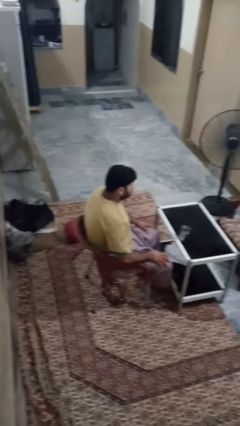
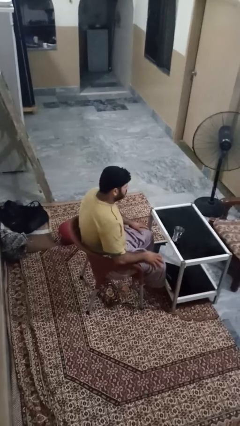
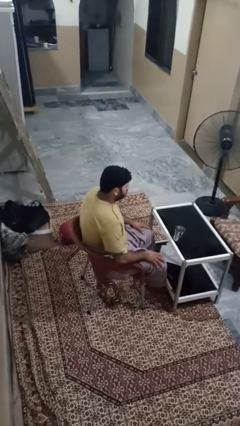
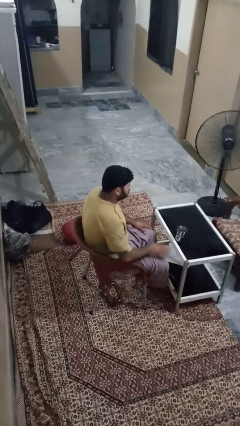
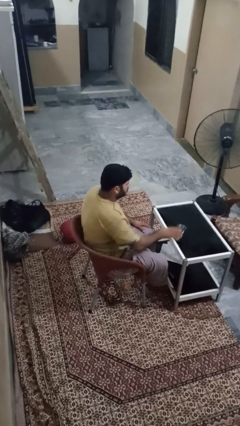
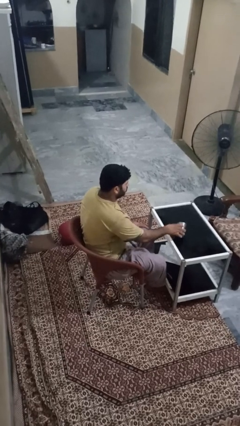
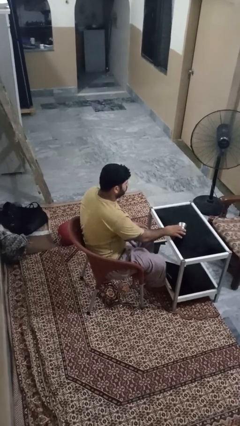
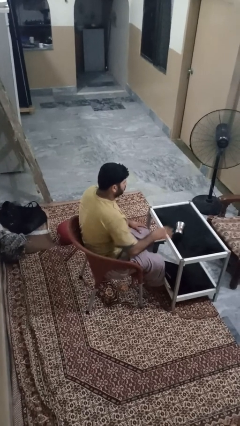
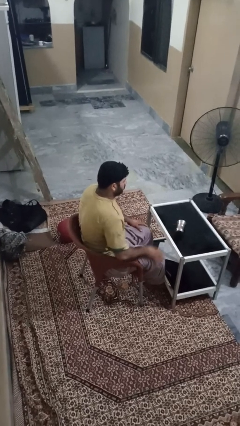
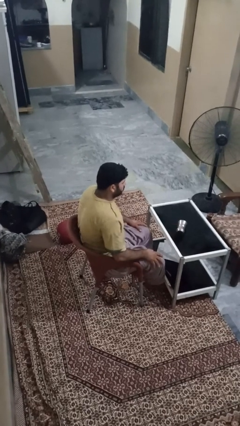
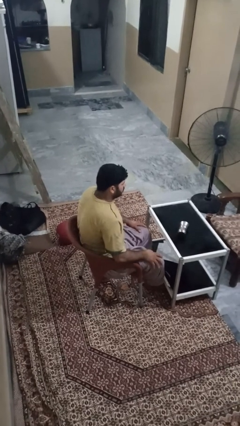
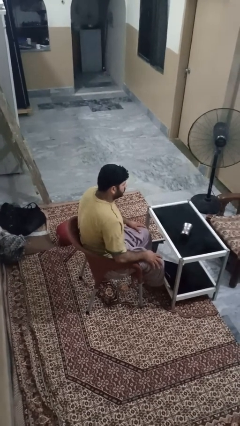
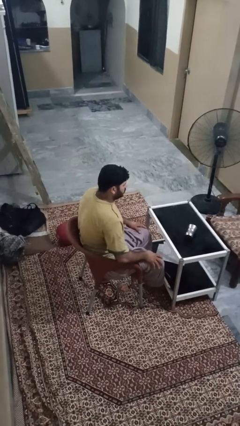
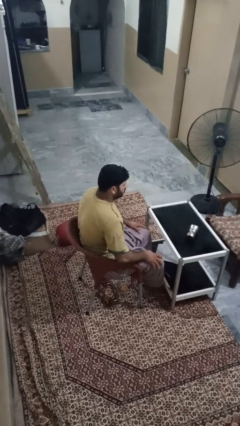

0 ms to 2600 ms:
person knocks over glass

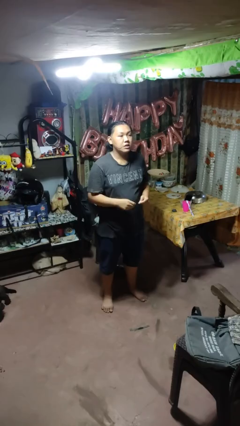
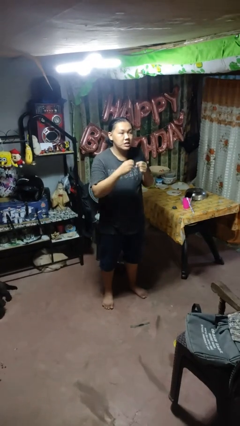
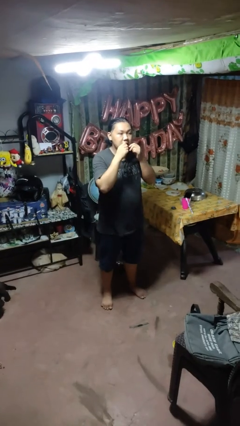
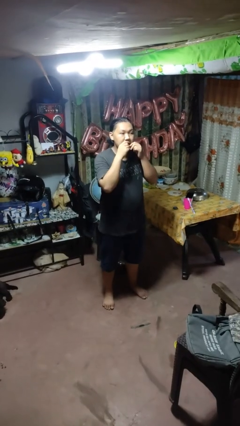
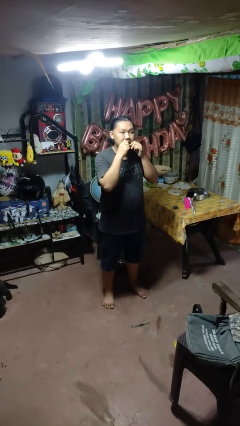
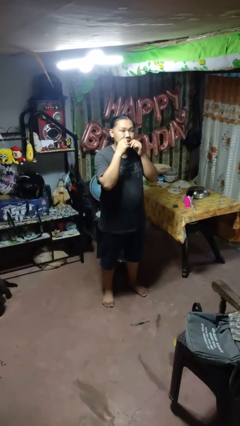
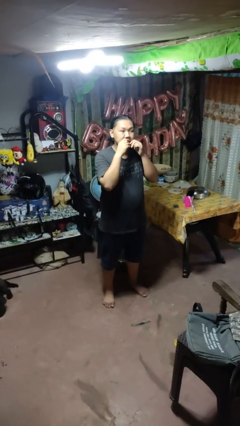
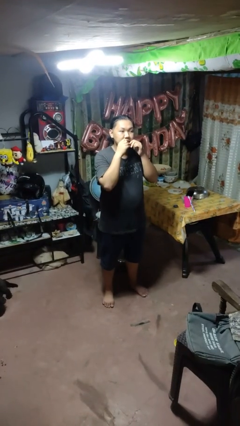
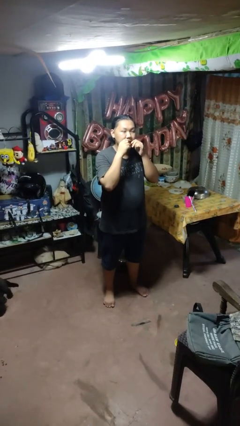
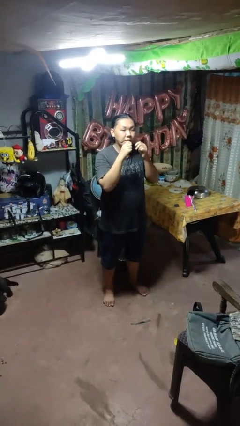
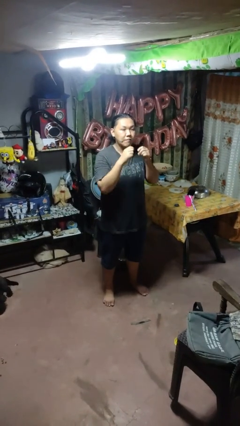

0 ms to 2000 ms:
person flosses

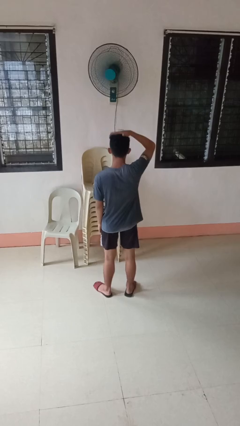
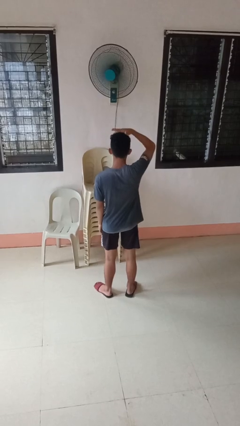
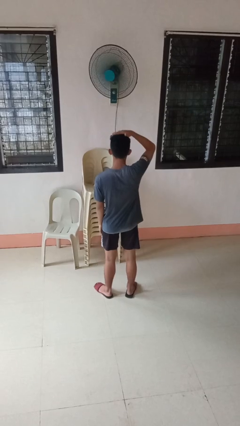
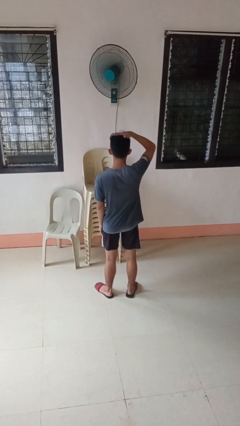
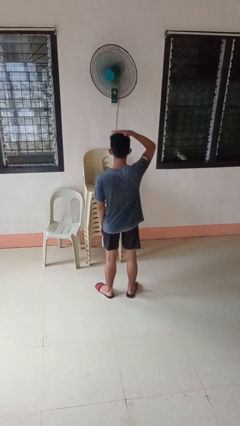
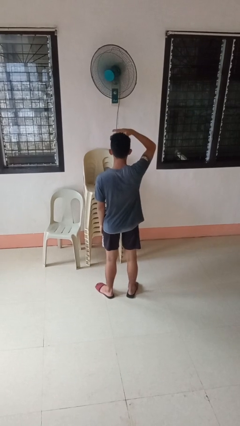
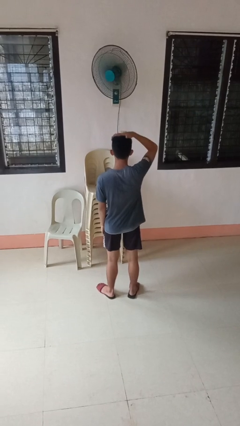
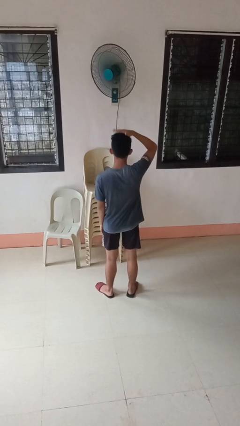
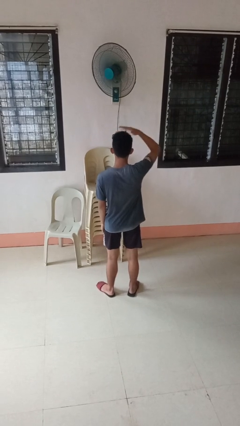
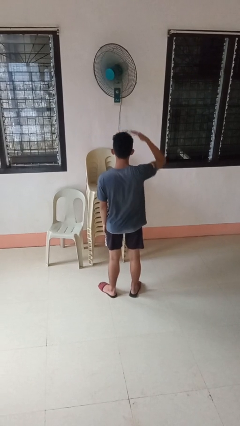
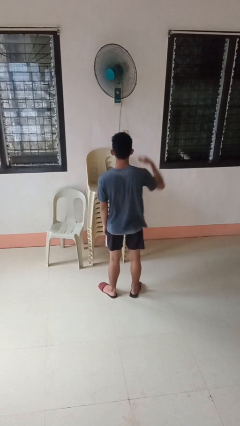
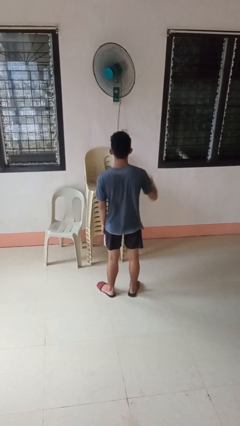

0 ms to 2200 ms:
person pats head

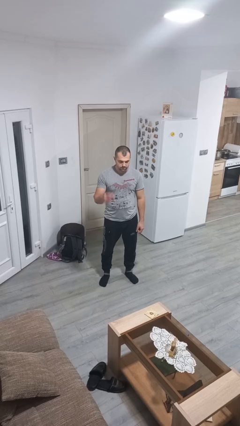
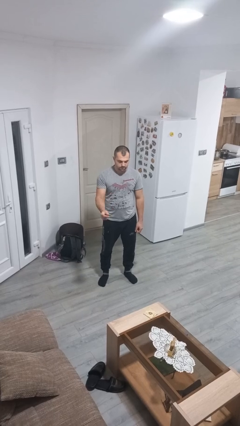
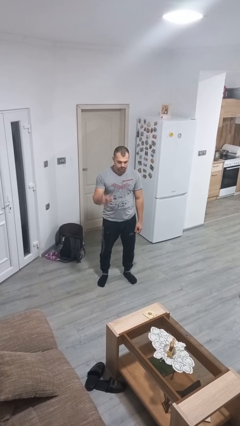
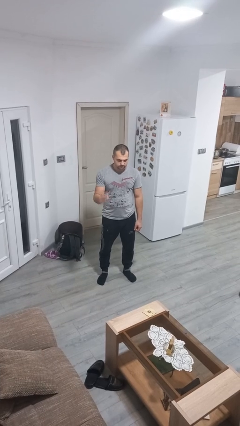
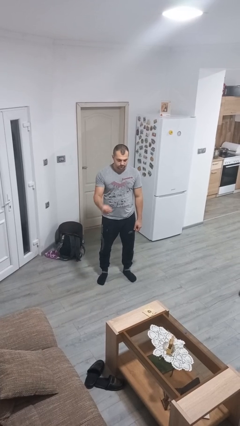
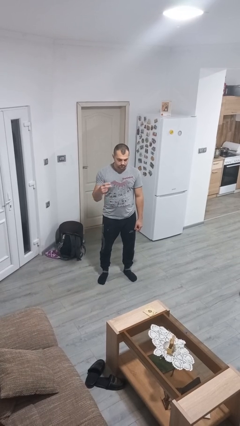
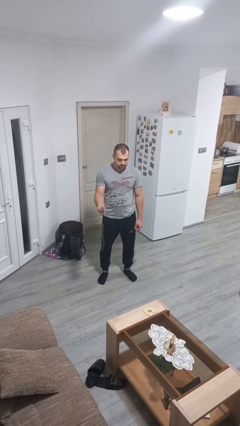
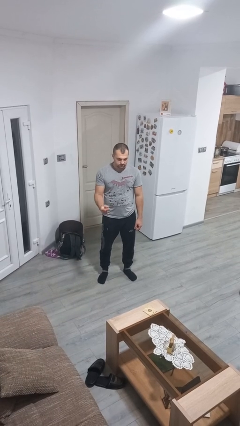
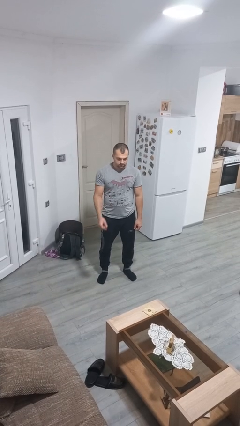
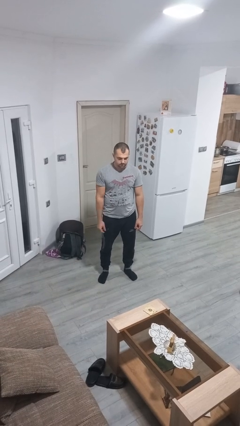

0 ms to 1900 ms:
person snaps fingers

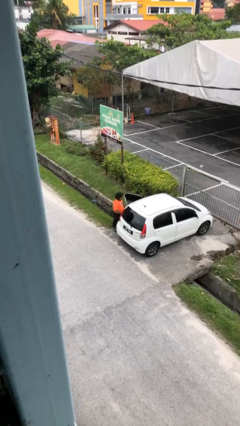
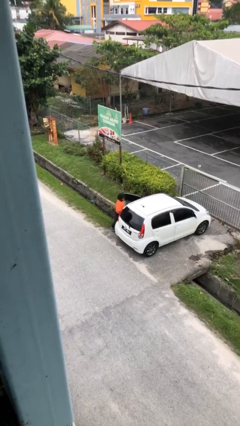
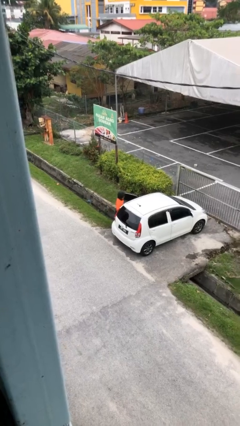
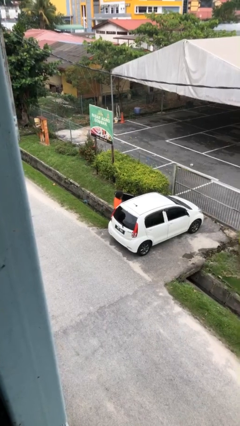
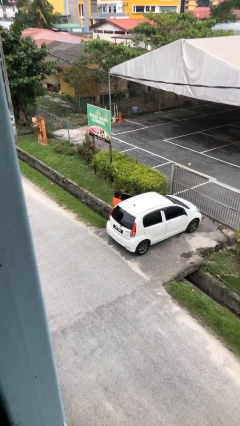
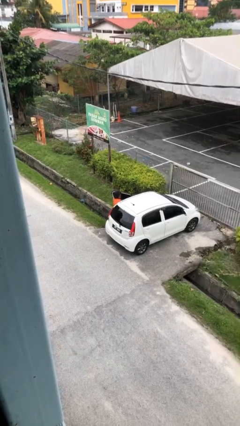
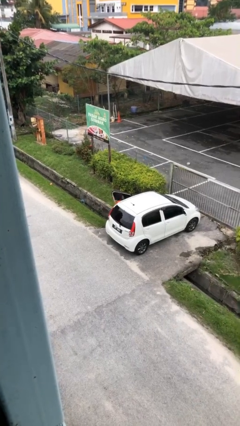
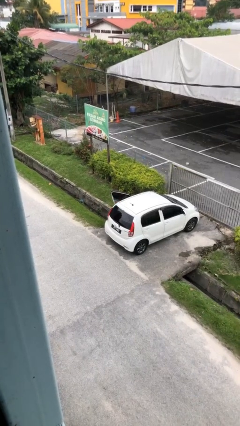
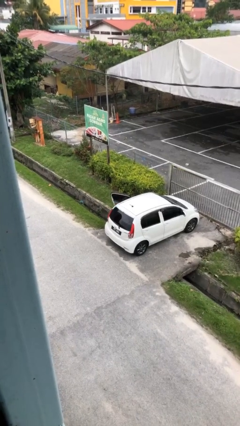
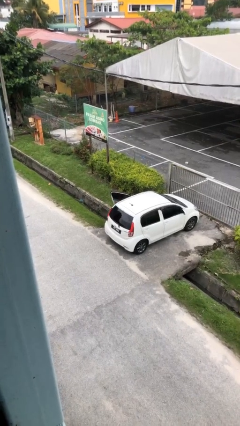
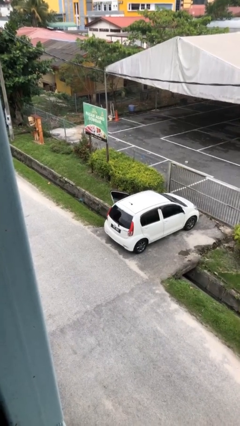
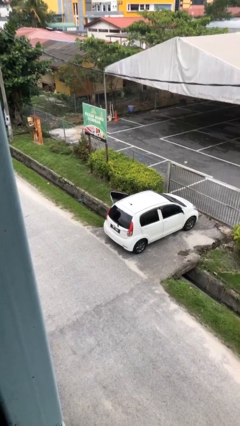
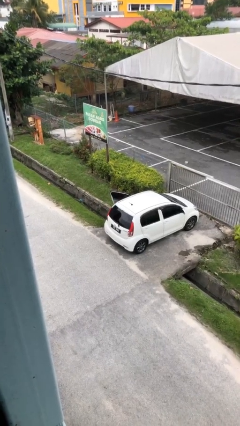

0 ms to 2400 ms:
person enters car

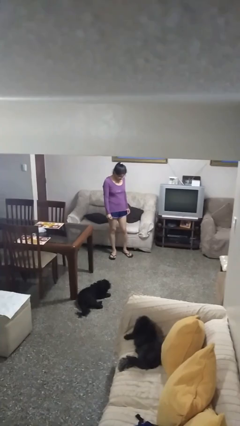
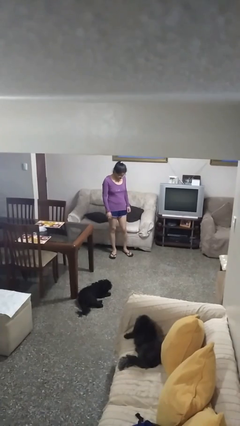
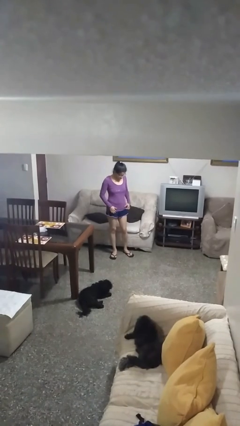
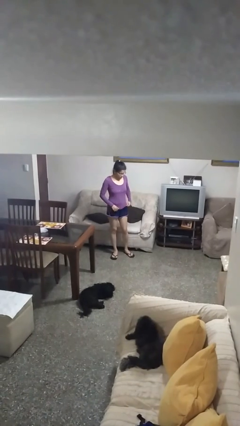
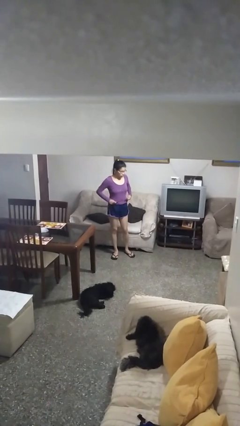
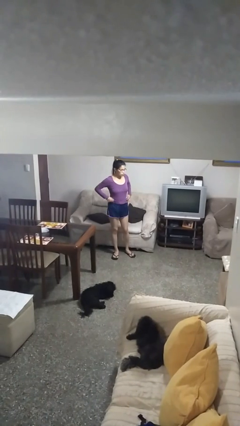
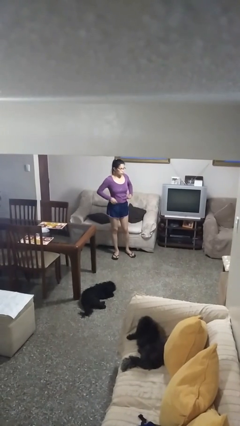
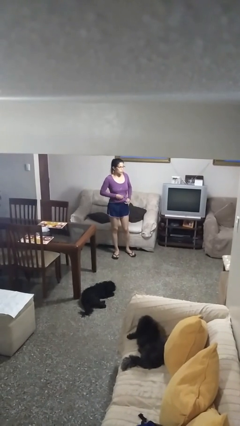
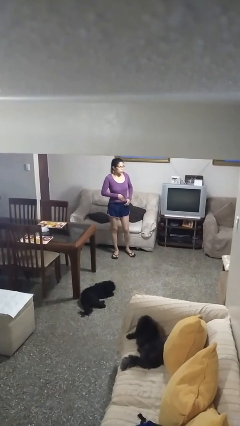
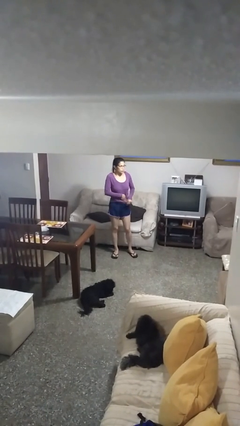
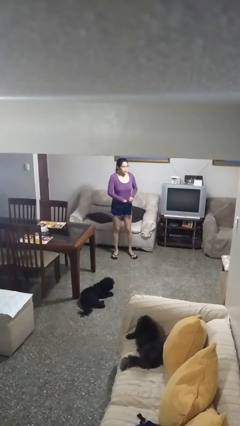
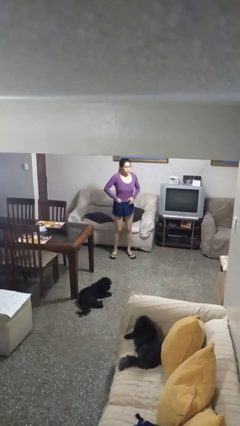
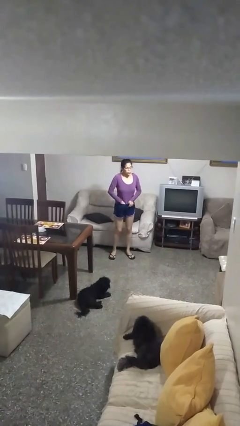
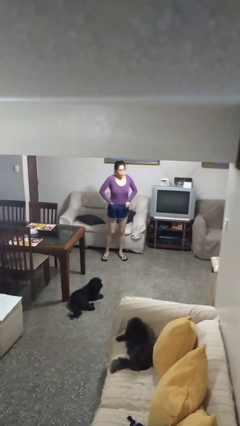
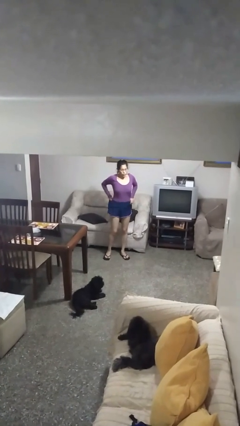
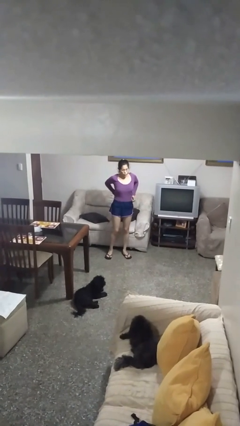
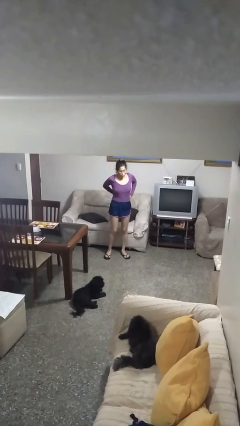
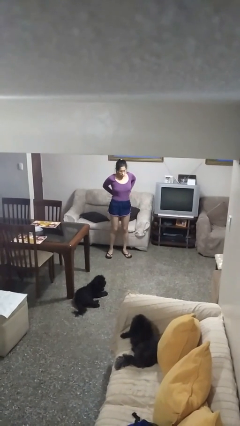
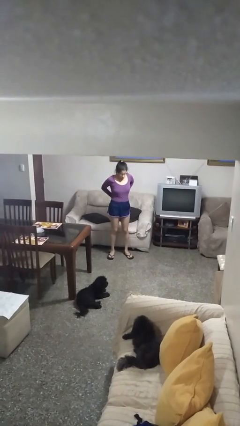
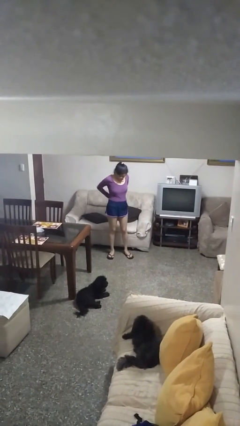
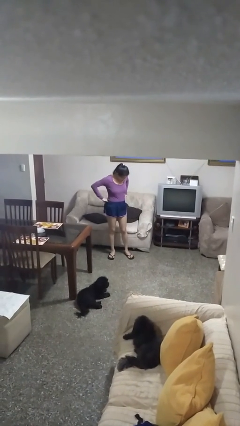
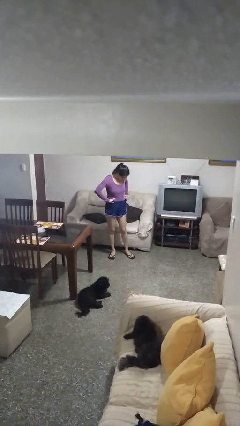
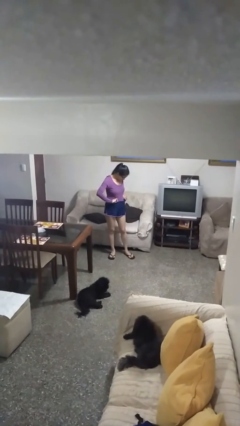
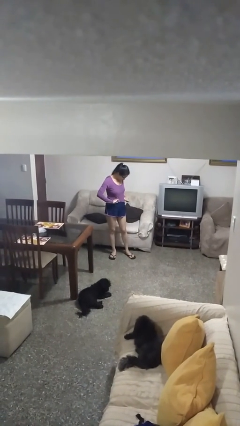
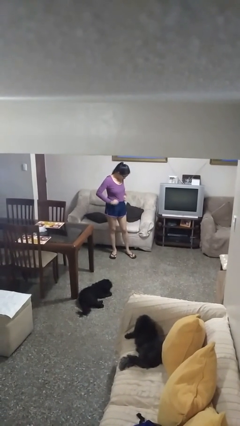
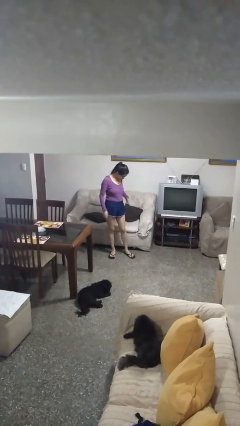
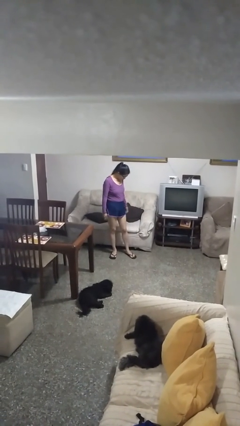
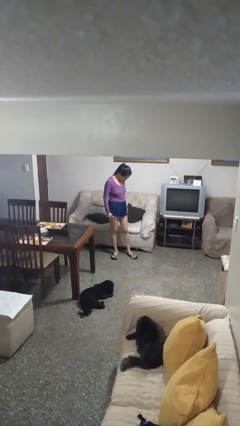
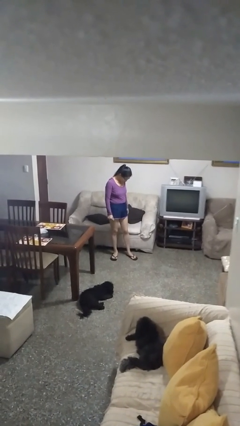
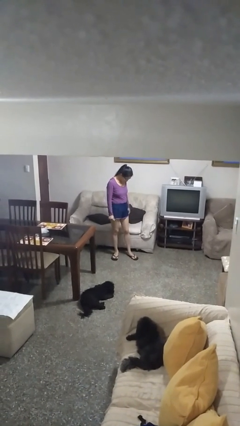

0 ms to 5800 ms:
person tucks in shirt

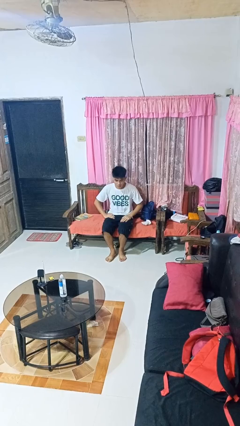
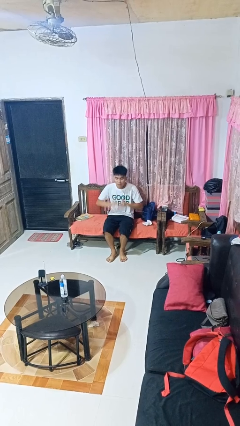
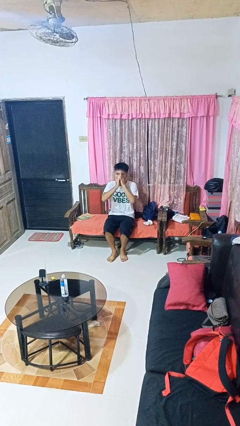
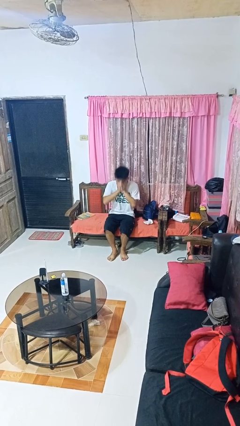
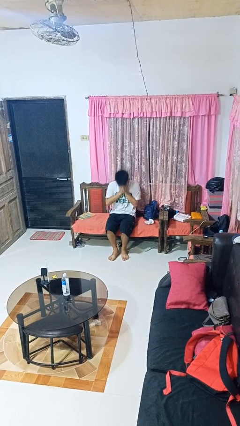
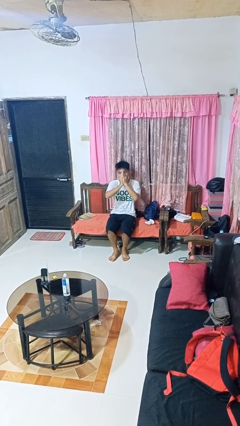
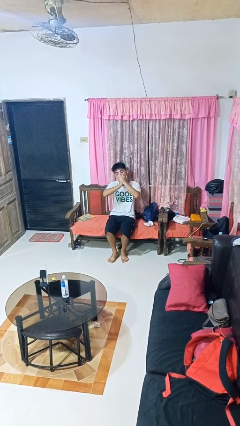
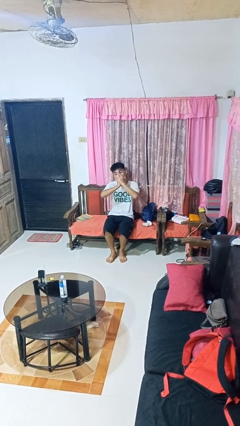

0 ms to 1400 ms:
person sneezes into hand
